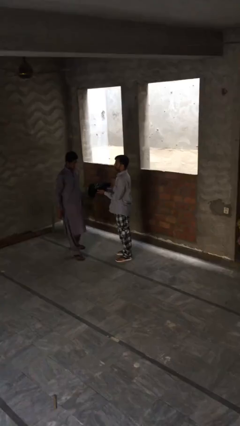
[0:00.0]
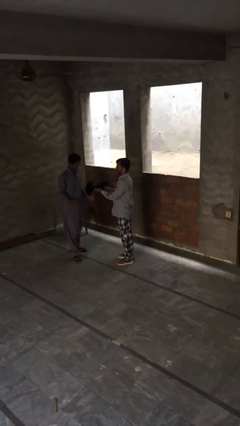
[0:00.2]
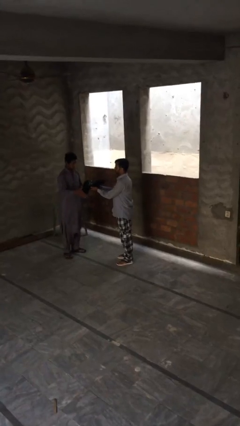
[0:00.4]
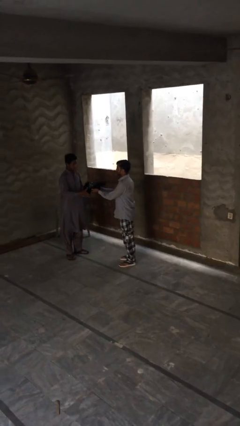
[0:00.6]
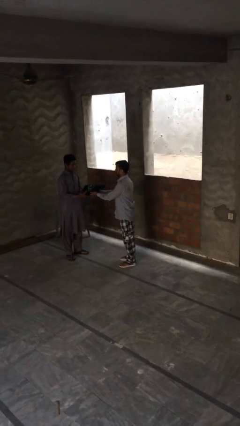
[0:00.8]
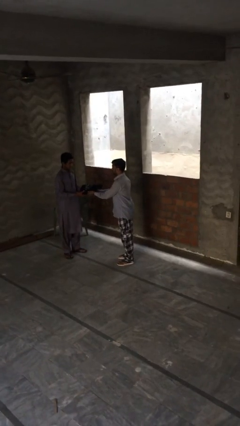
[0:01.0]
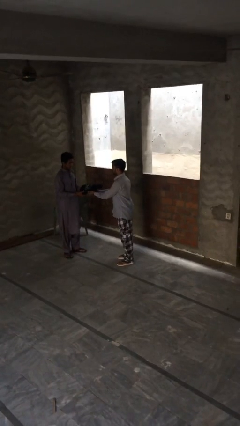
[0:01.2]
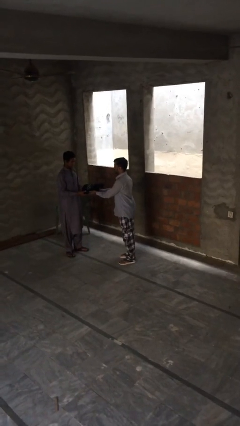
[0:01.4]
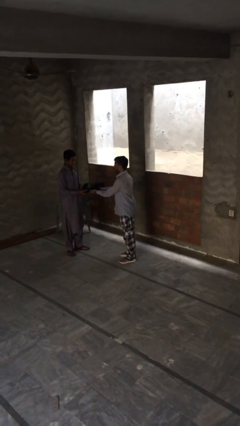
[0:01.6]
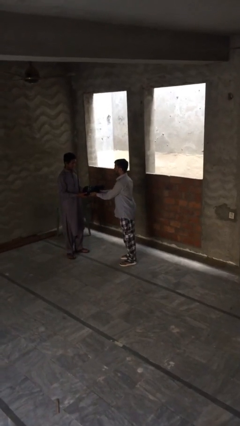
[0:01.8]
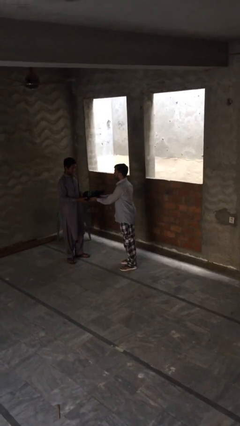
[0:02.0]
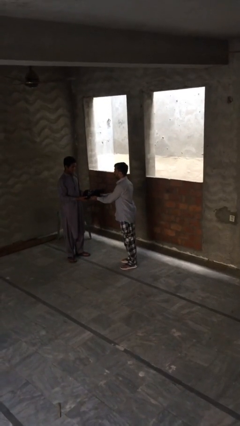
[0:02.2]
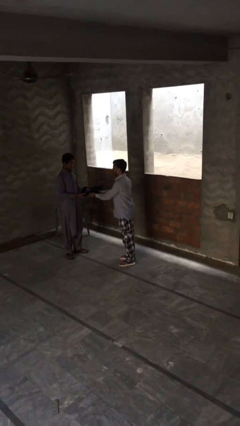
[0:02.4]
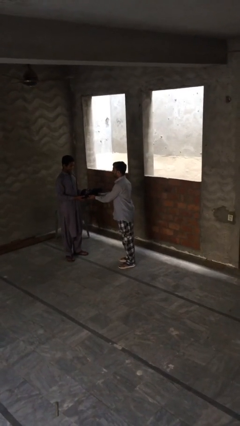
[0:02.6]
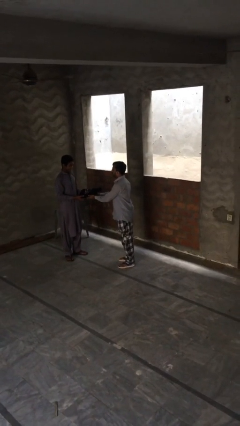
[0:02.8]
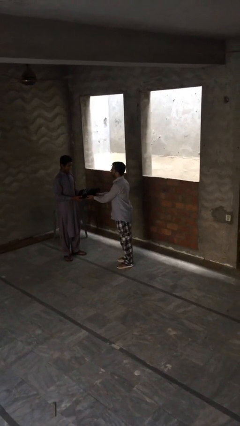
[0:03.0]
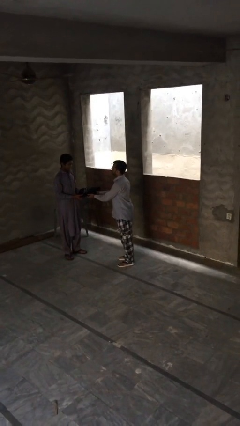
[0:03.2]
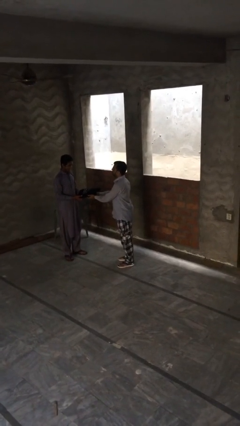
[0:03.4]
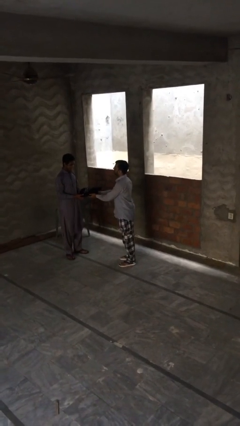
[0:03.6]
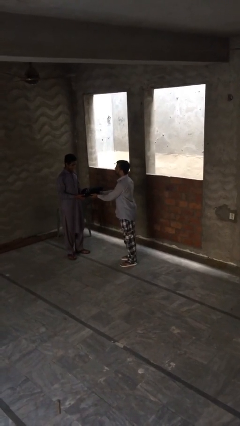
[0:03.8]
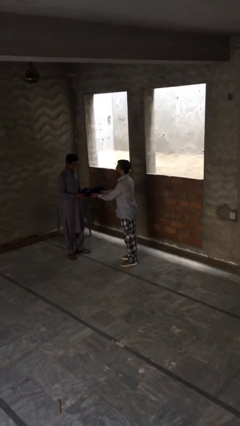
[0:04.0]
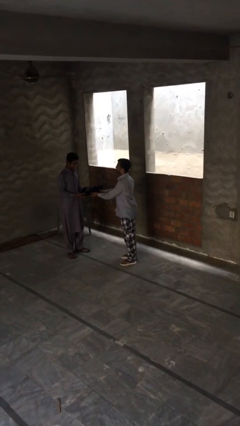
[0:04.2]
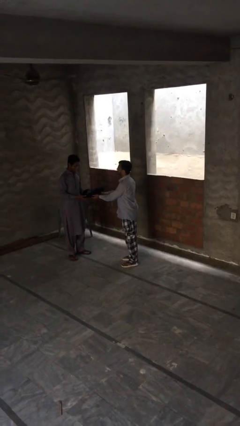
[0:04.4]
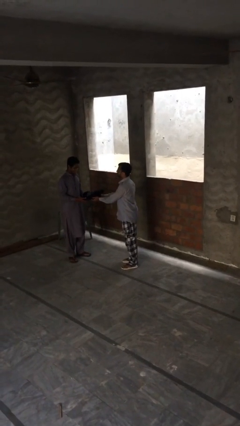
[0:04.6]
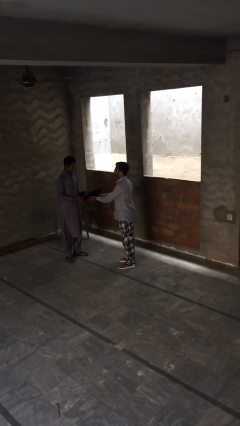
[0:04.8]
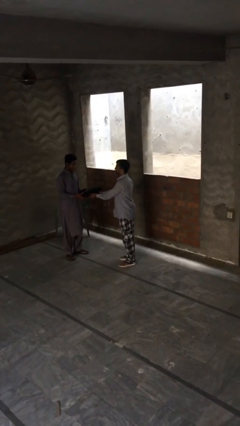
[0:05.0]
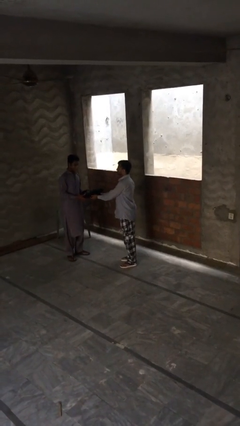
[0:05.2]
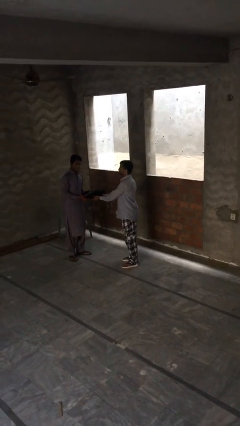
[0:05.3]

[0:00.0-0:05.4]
person transfers object to person

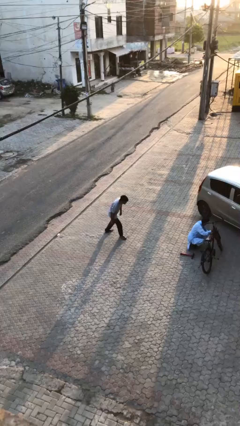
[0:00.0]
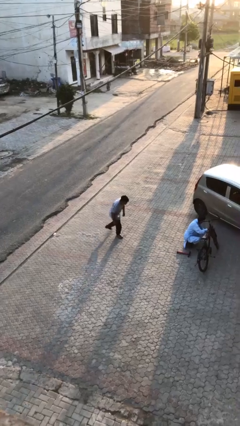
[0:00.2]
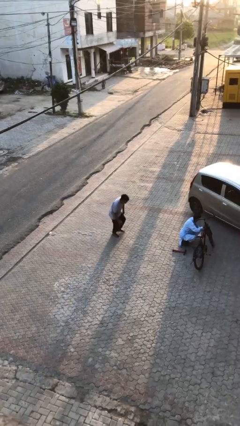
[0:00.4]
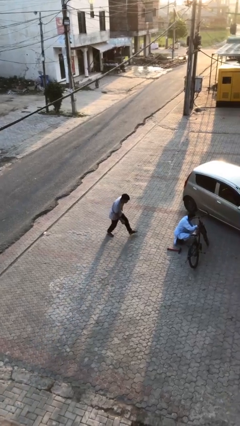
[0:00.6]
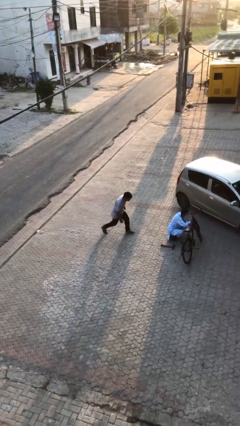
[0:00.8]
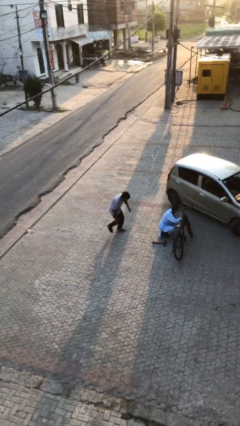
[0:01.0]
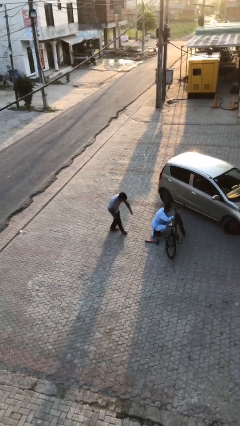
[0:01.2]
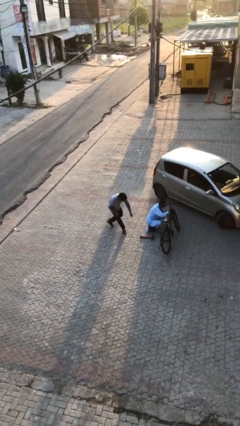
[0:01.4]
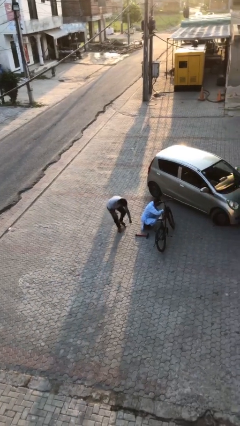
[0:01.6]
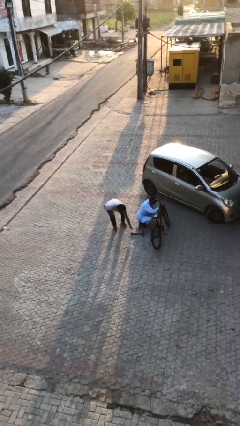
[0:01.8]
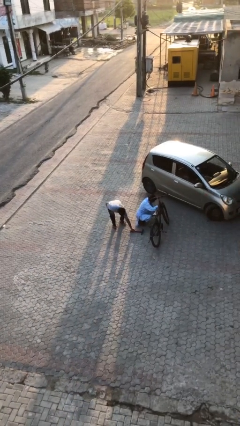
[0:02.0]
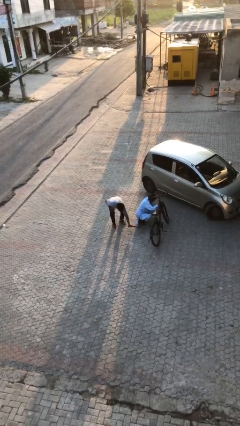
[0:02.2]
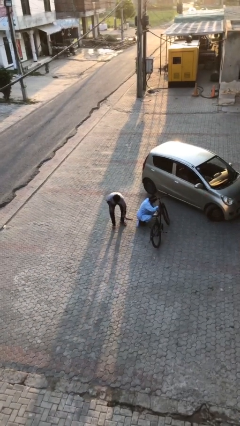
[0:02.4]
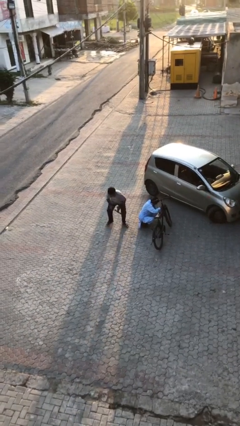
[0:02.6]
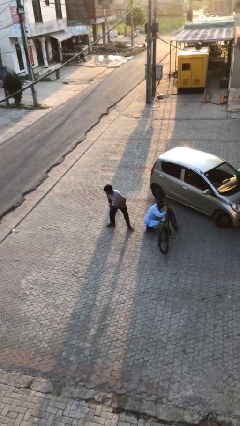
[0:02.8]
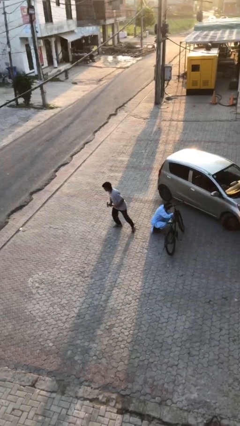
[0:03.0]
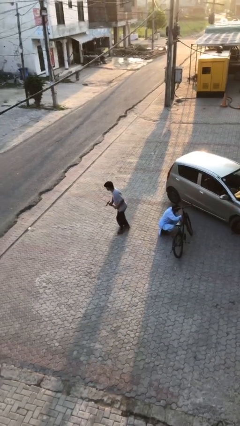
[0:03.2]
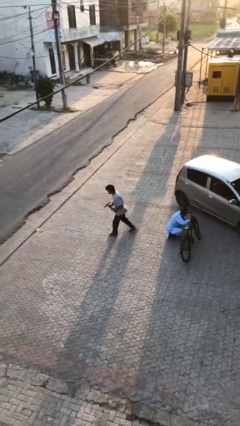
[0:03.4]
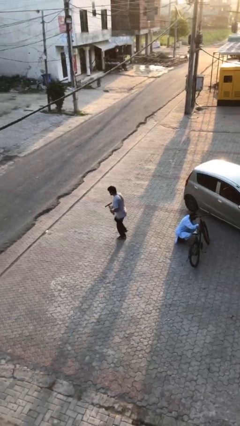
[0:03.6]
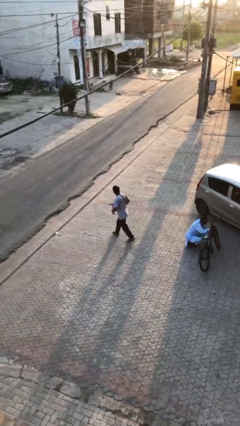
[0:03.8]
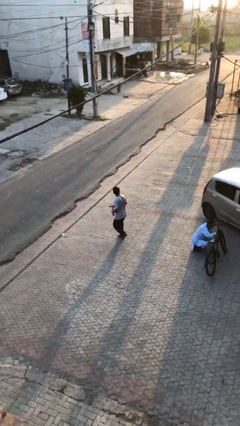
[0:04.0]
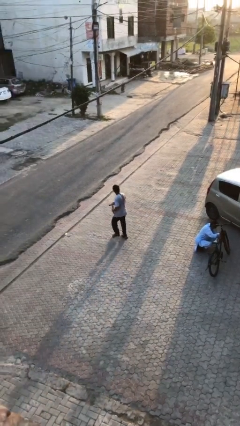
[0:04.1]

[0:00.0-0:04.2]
person steals object from person

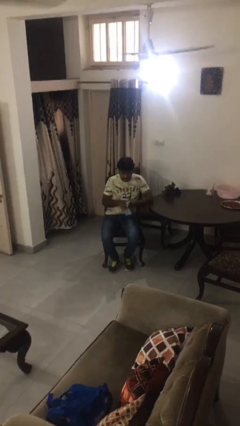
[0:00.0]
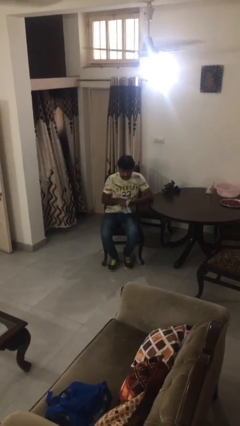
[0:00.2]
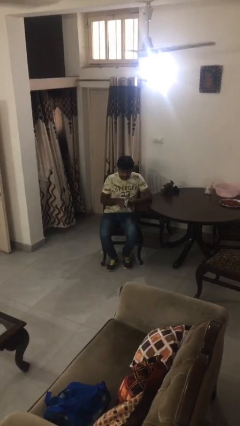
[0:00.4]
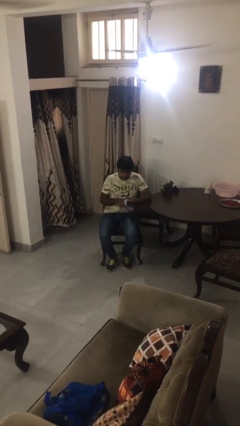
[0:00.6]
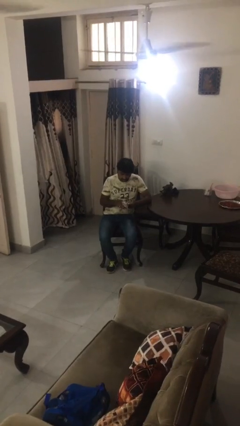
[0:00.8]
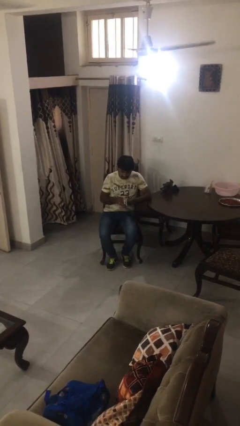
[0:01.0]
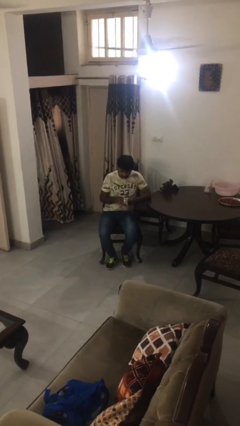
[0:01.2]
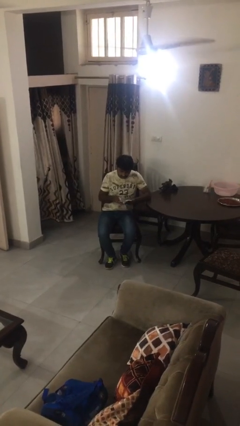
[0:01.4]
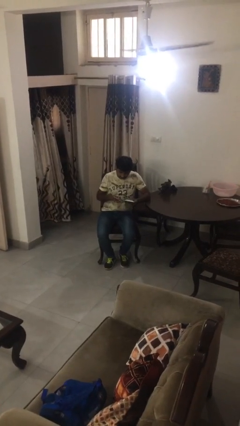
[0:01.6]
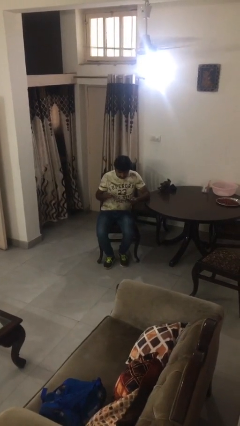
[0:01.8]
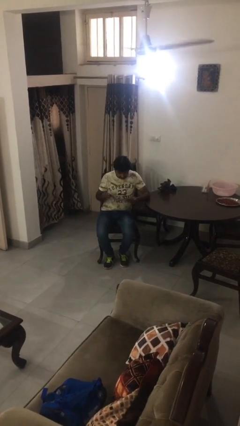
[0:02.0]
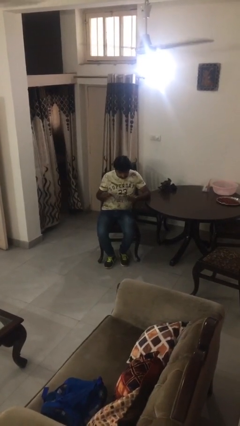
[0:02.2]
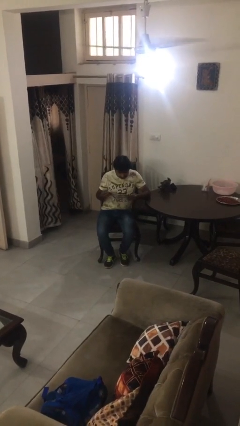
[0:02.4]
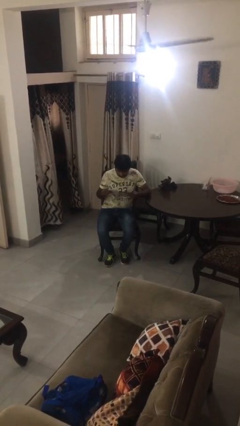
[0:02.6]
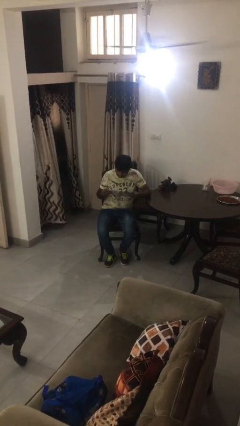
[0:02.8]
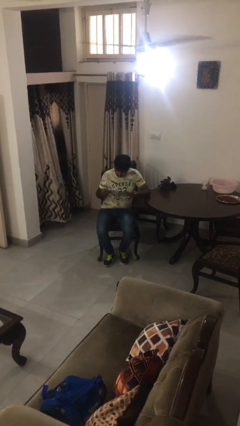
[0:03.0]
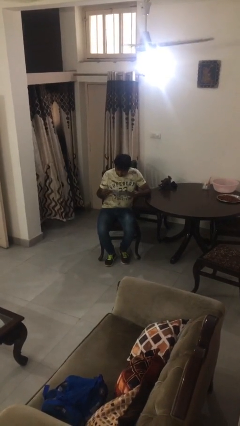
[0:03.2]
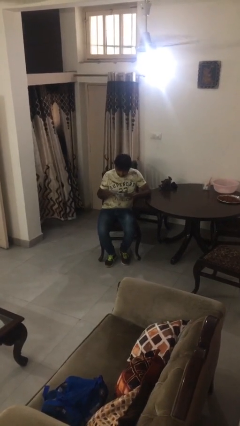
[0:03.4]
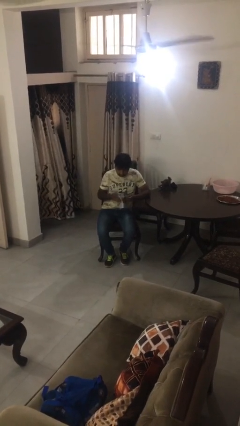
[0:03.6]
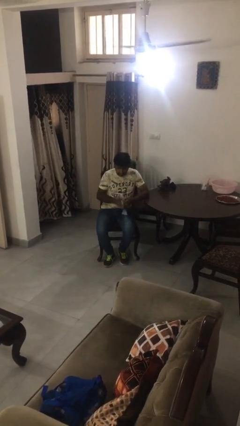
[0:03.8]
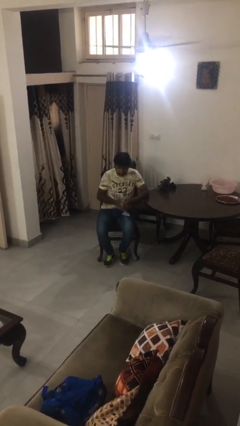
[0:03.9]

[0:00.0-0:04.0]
person reads magazine

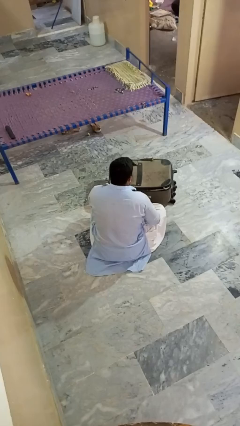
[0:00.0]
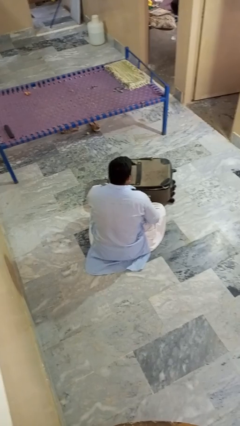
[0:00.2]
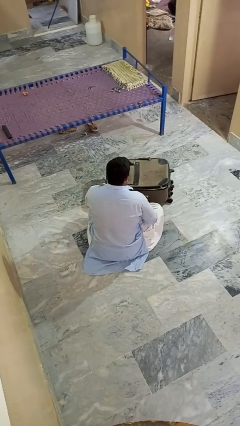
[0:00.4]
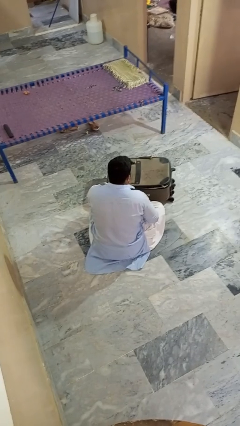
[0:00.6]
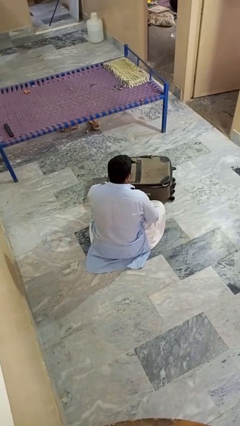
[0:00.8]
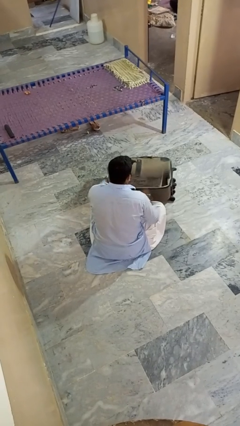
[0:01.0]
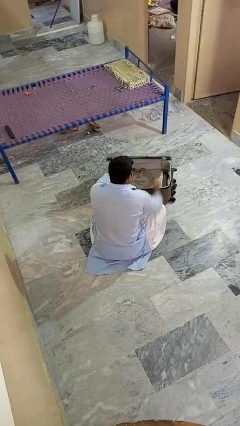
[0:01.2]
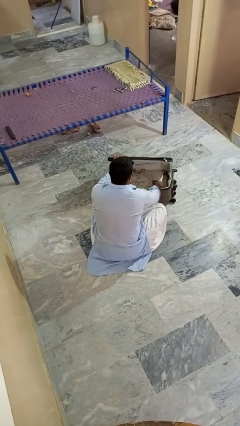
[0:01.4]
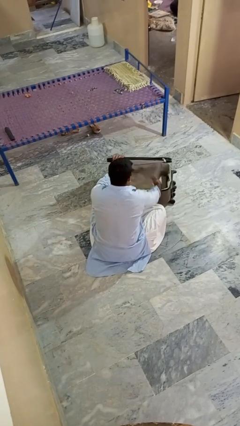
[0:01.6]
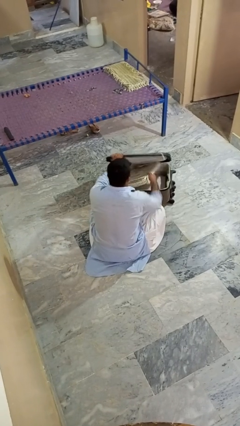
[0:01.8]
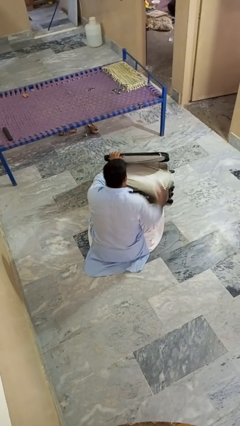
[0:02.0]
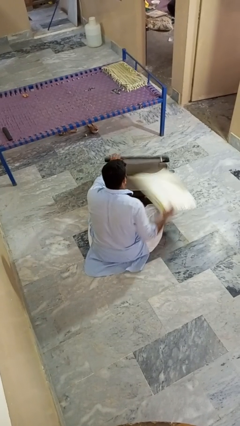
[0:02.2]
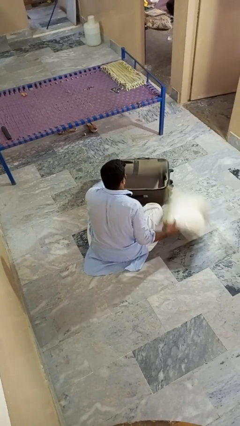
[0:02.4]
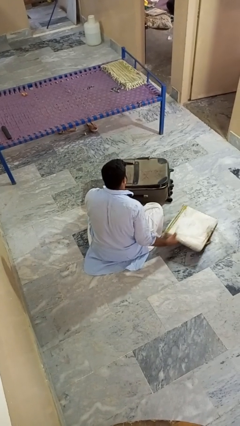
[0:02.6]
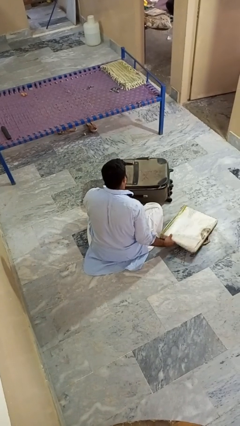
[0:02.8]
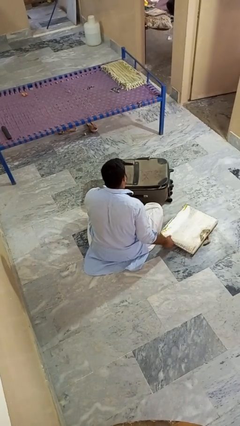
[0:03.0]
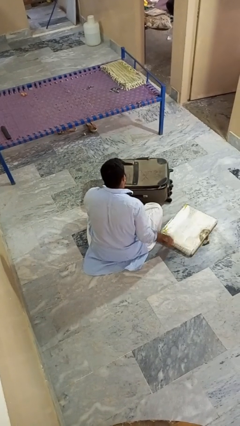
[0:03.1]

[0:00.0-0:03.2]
person takes object from bag

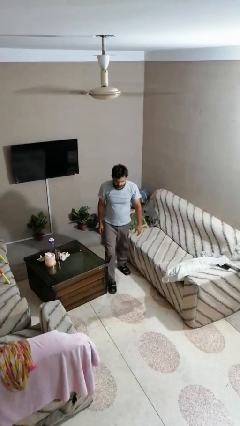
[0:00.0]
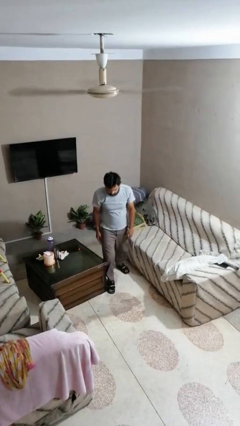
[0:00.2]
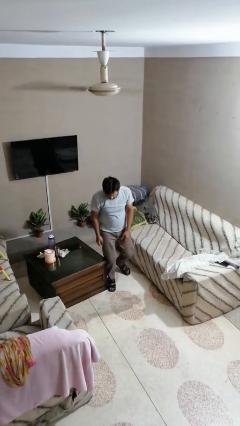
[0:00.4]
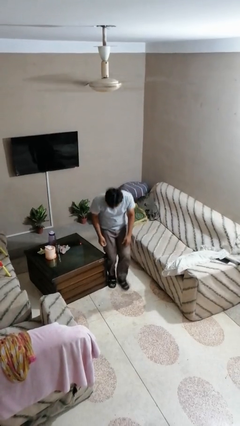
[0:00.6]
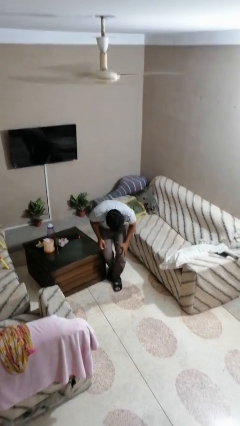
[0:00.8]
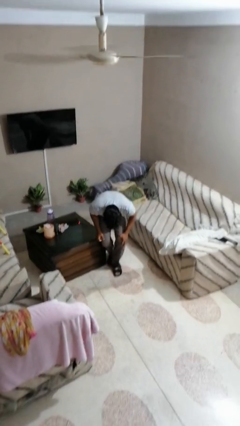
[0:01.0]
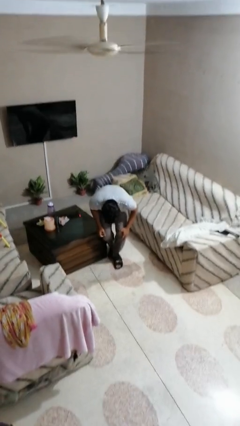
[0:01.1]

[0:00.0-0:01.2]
person trips on object on floor
